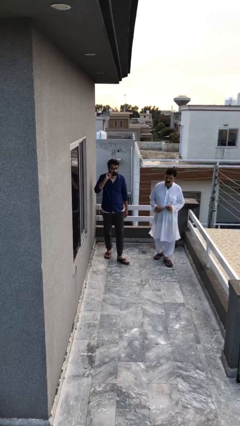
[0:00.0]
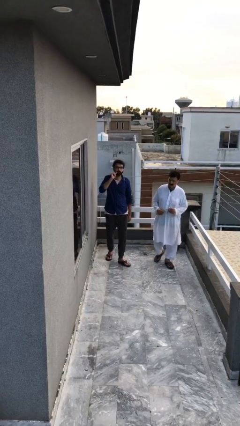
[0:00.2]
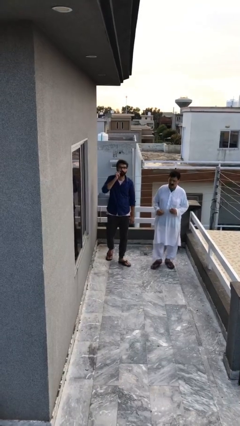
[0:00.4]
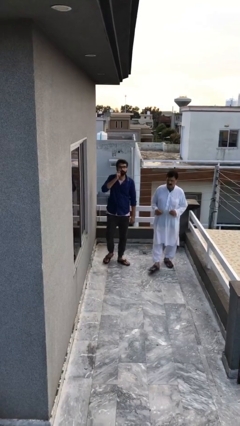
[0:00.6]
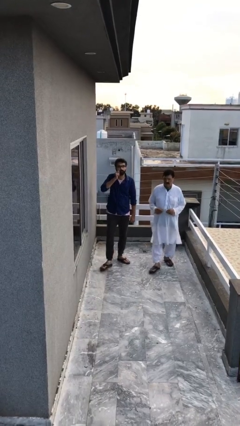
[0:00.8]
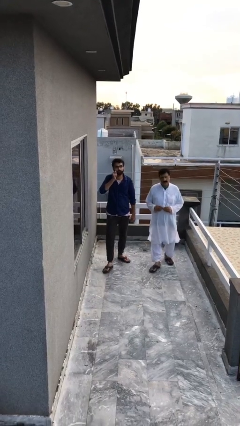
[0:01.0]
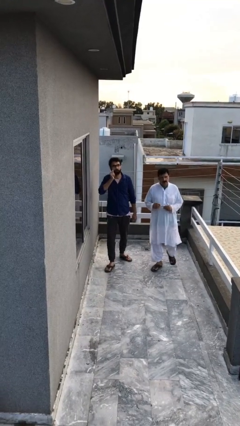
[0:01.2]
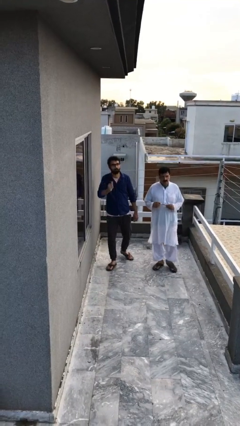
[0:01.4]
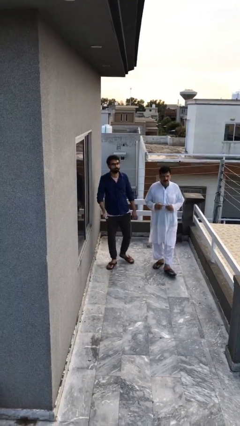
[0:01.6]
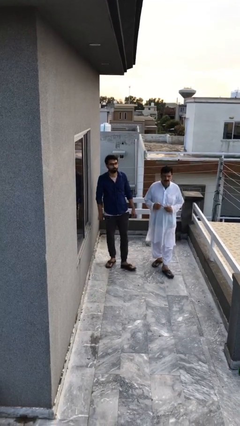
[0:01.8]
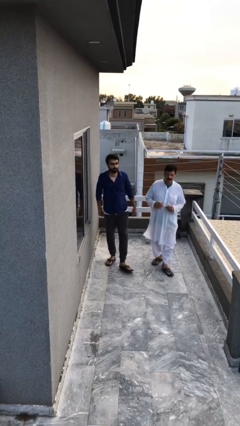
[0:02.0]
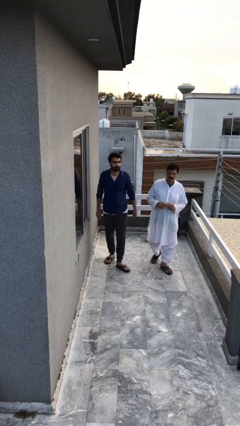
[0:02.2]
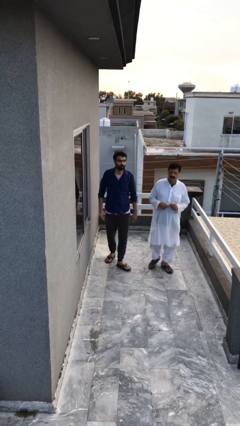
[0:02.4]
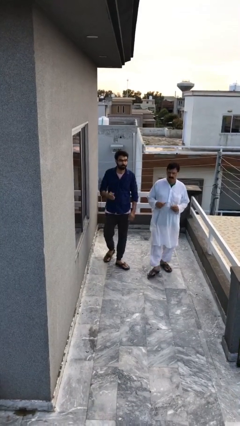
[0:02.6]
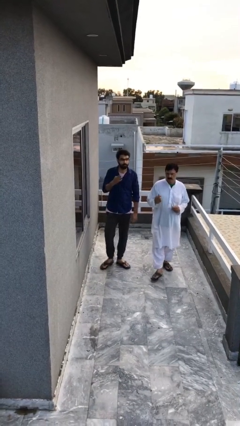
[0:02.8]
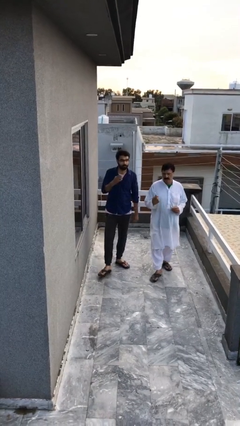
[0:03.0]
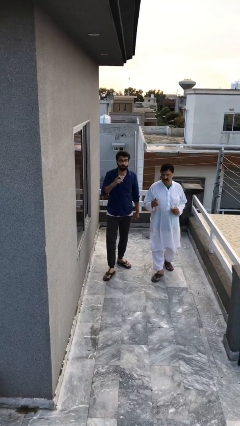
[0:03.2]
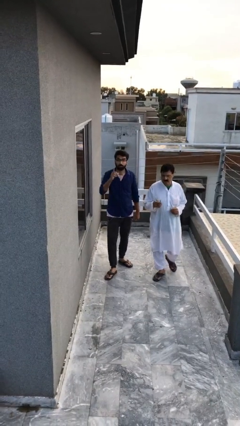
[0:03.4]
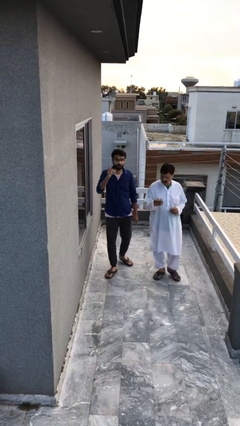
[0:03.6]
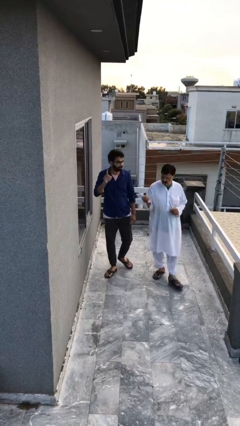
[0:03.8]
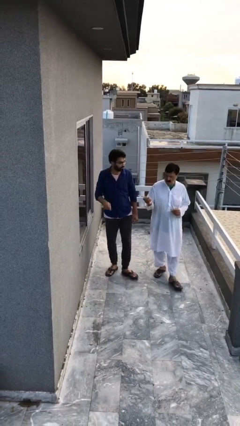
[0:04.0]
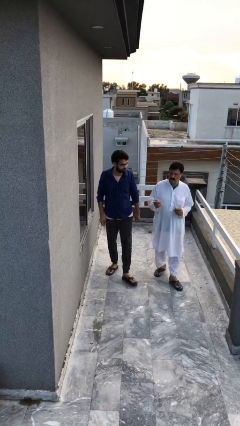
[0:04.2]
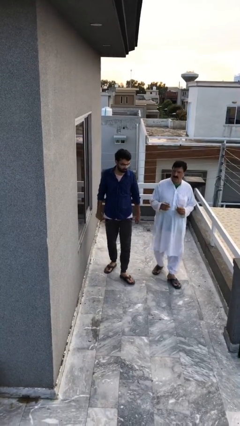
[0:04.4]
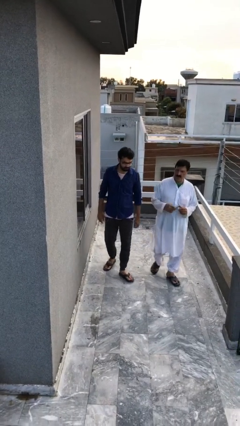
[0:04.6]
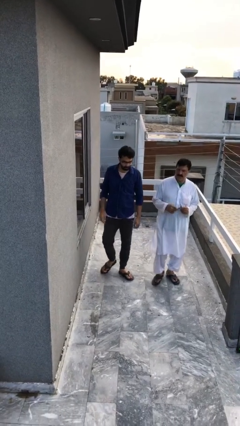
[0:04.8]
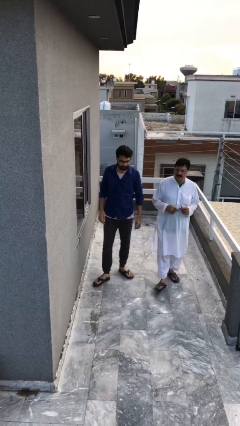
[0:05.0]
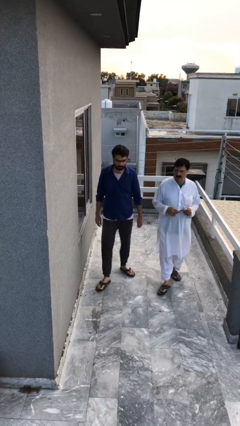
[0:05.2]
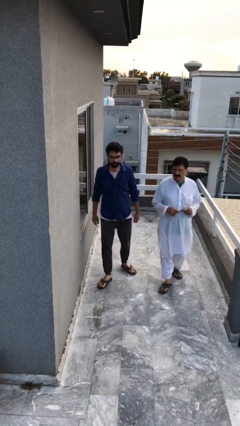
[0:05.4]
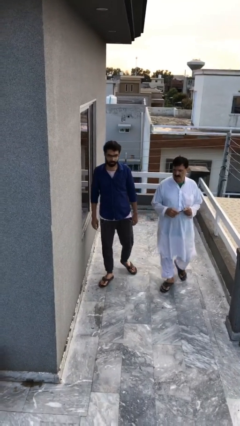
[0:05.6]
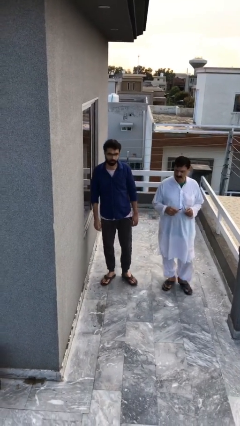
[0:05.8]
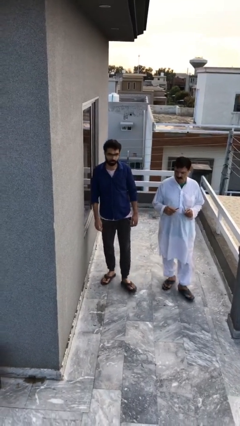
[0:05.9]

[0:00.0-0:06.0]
person talks to person

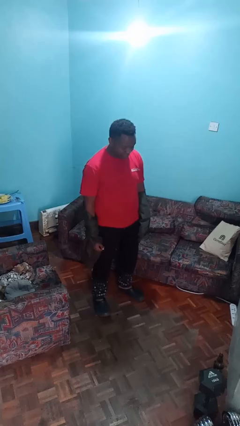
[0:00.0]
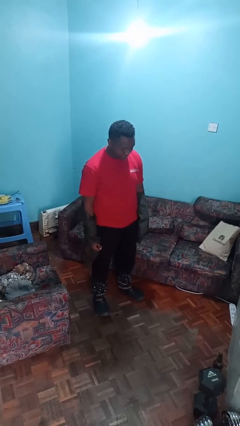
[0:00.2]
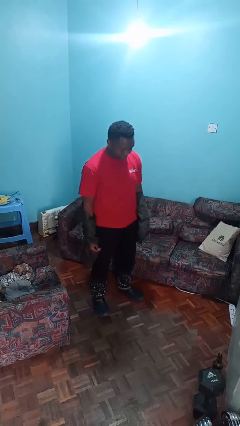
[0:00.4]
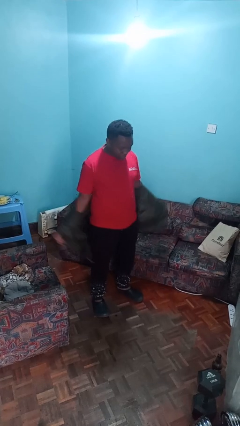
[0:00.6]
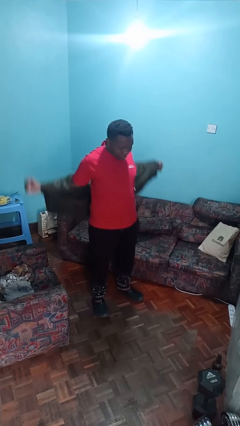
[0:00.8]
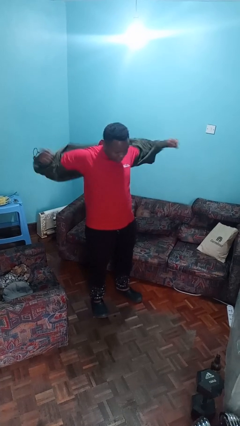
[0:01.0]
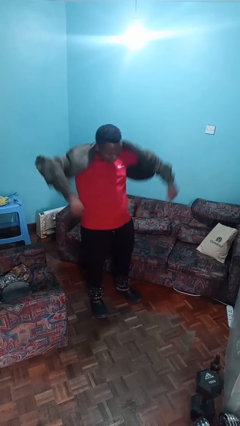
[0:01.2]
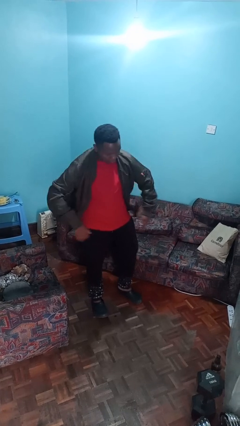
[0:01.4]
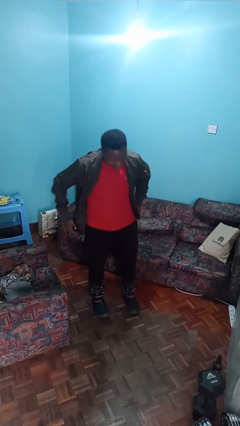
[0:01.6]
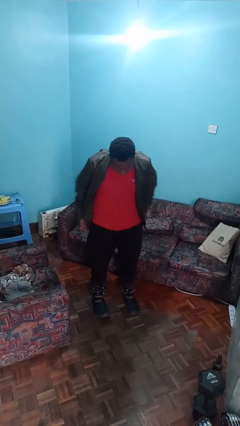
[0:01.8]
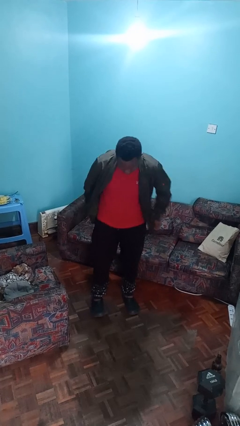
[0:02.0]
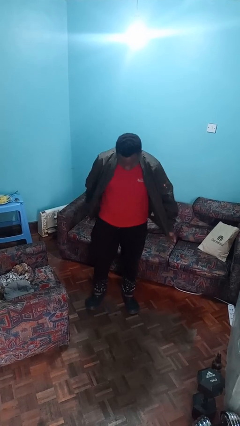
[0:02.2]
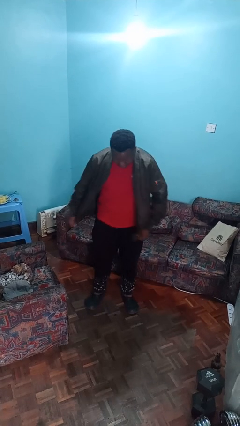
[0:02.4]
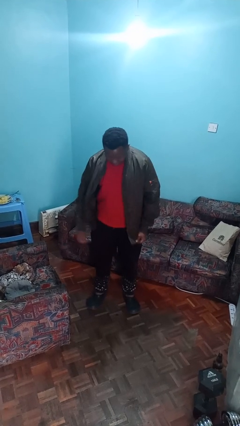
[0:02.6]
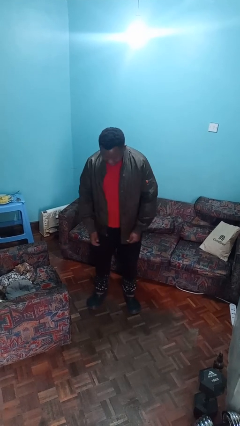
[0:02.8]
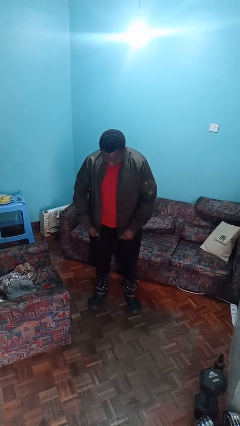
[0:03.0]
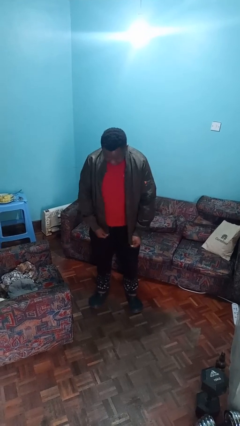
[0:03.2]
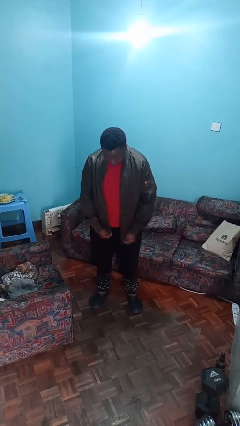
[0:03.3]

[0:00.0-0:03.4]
person puts on jacket

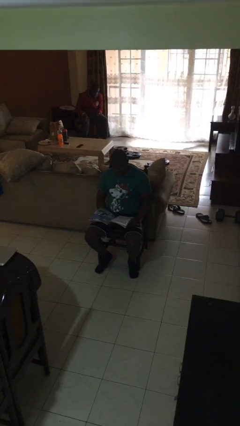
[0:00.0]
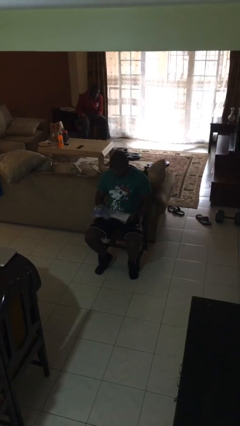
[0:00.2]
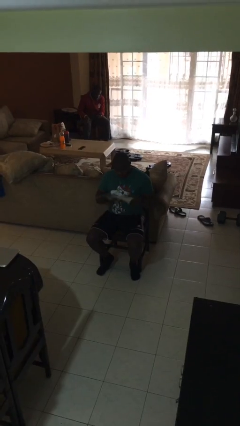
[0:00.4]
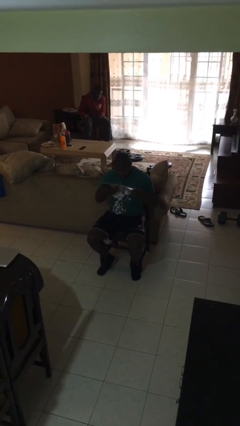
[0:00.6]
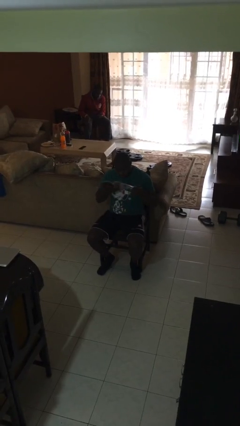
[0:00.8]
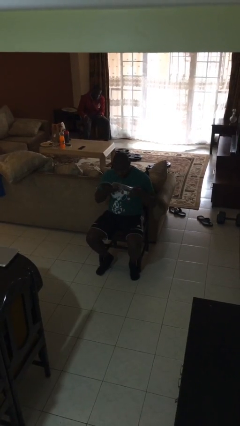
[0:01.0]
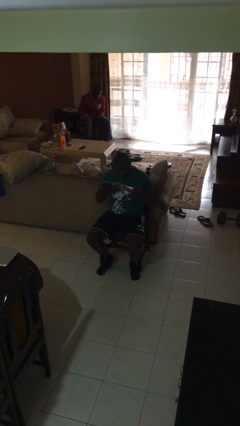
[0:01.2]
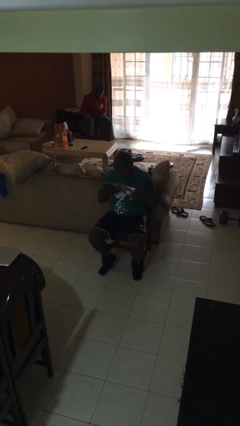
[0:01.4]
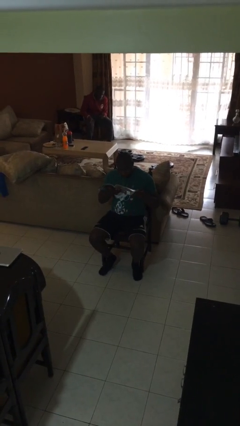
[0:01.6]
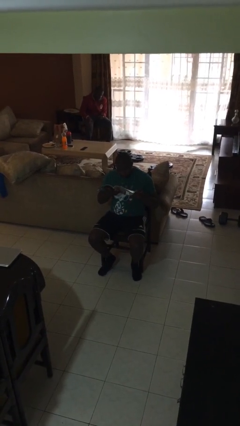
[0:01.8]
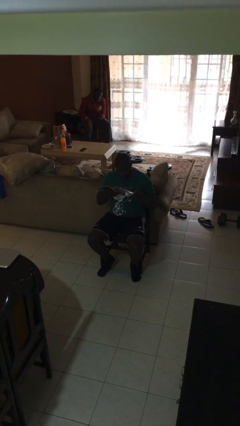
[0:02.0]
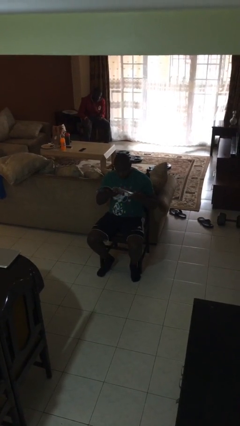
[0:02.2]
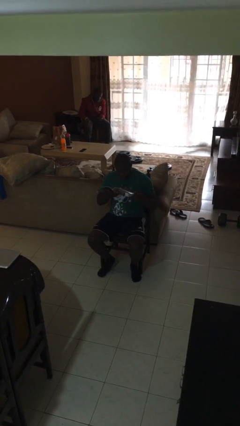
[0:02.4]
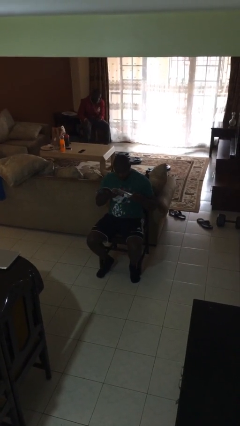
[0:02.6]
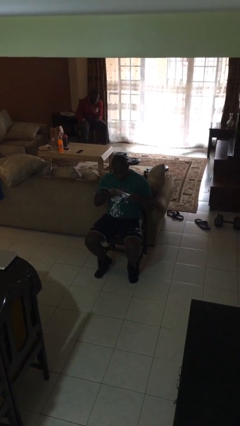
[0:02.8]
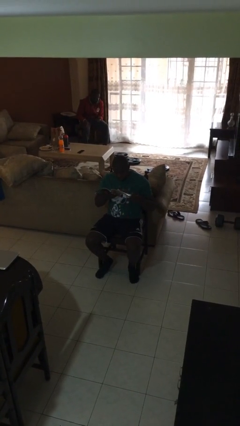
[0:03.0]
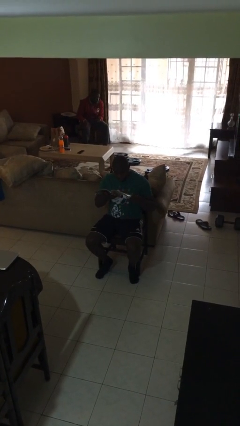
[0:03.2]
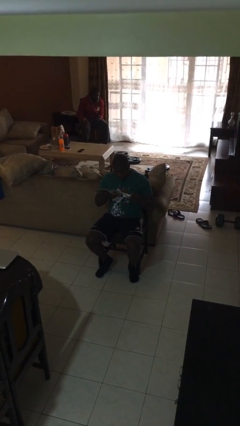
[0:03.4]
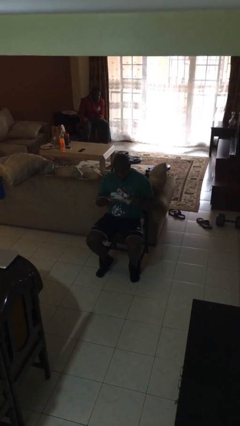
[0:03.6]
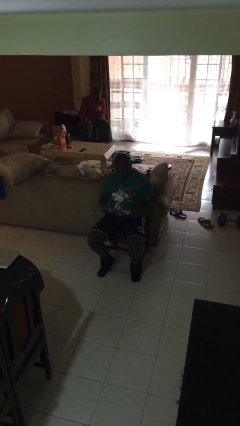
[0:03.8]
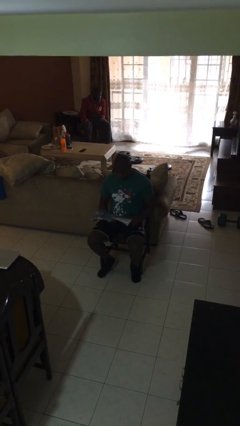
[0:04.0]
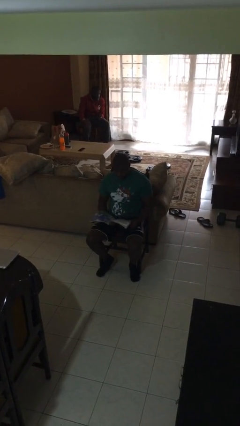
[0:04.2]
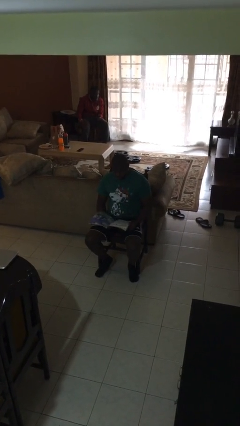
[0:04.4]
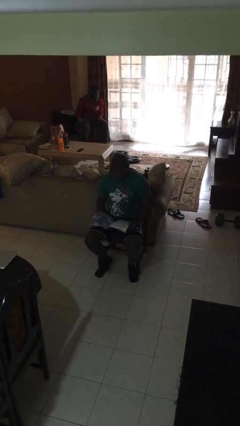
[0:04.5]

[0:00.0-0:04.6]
person reads document

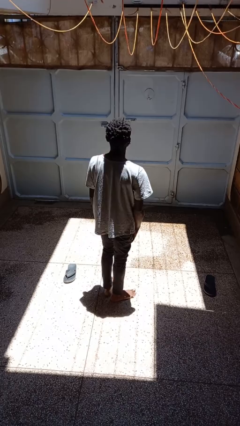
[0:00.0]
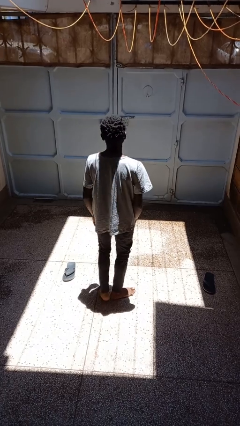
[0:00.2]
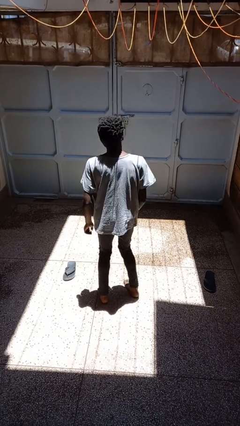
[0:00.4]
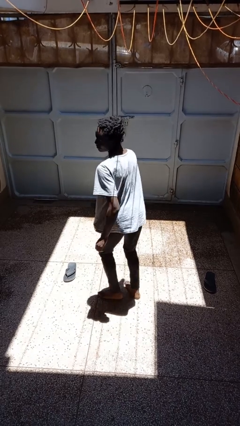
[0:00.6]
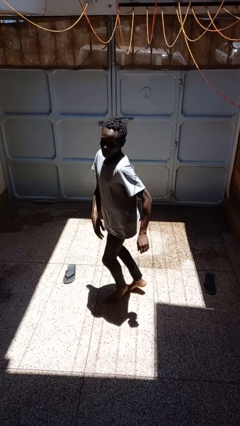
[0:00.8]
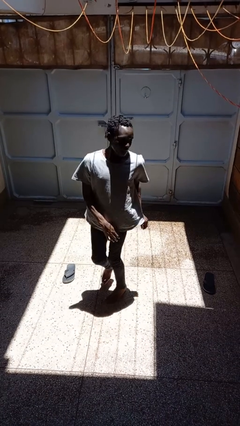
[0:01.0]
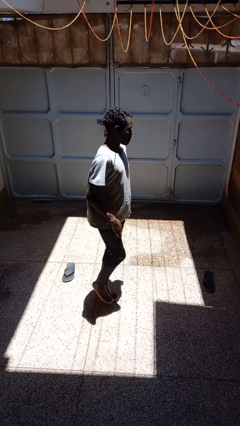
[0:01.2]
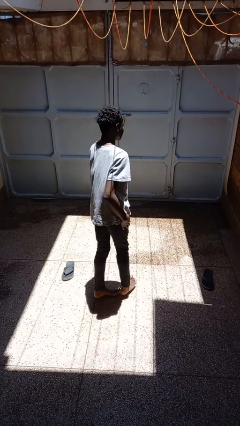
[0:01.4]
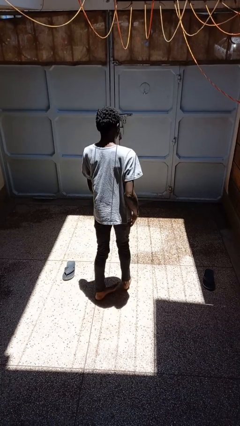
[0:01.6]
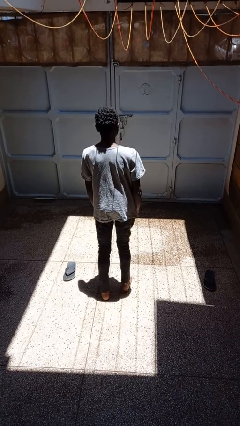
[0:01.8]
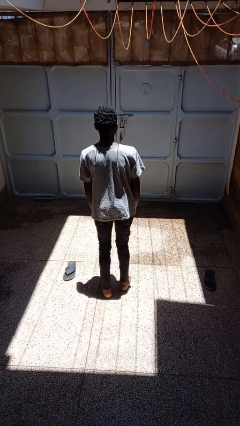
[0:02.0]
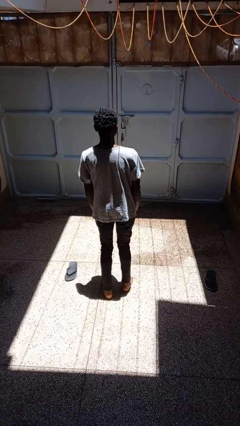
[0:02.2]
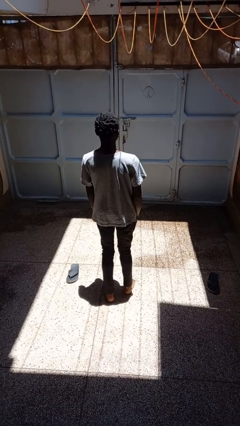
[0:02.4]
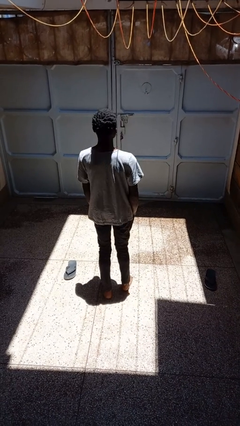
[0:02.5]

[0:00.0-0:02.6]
person twirls

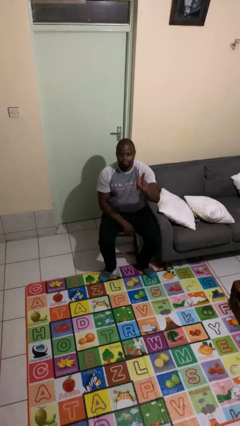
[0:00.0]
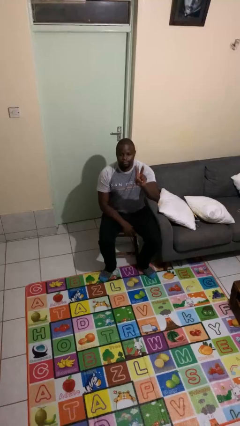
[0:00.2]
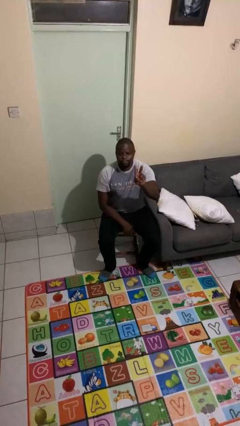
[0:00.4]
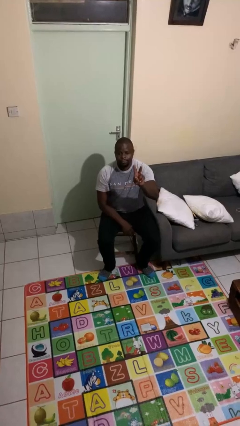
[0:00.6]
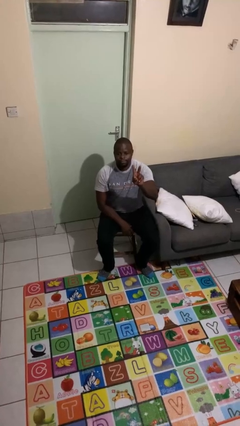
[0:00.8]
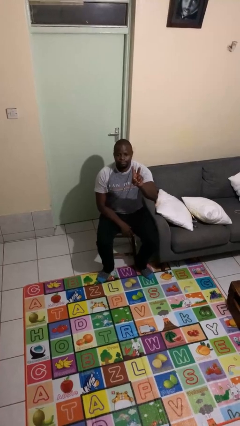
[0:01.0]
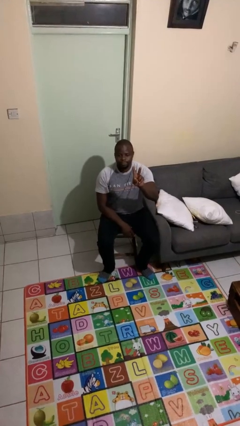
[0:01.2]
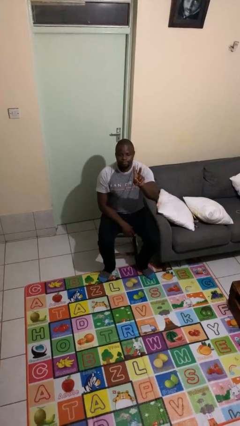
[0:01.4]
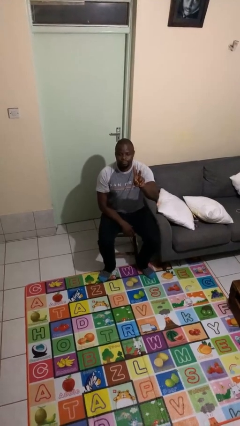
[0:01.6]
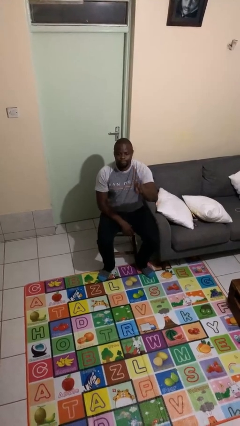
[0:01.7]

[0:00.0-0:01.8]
person gestures peace
